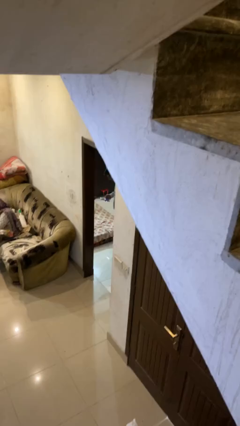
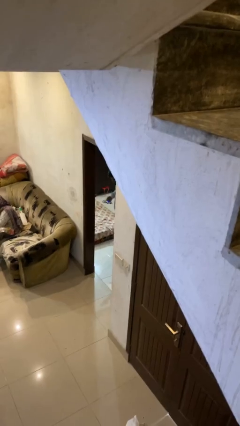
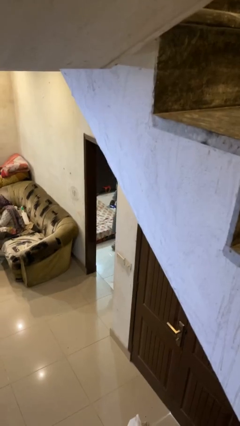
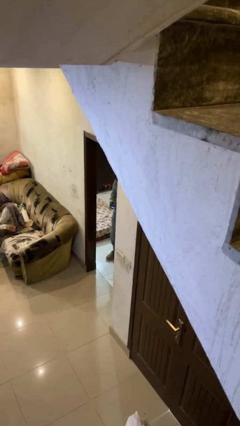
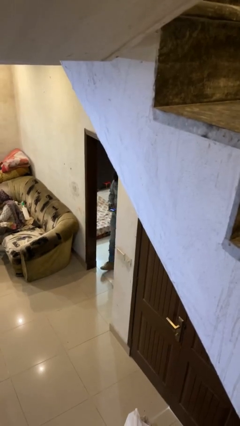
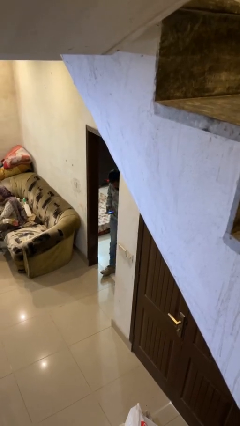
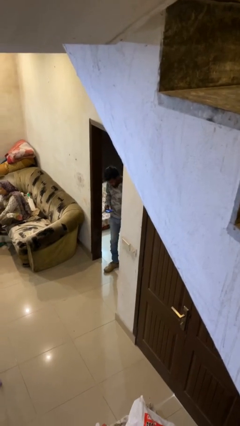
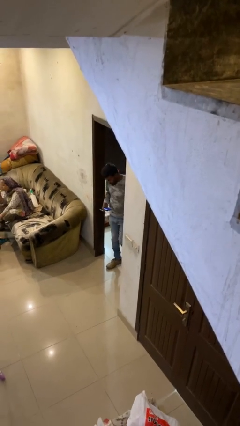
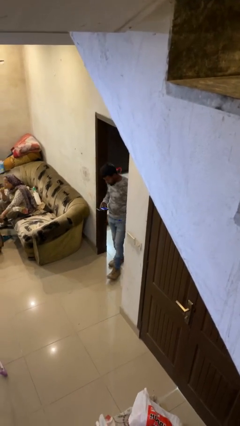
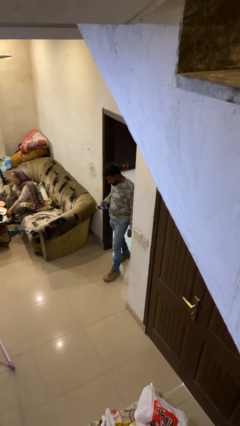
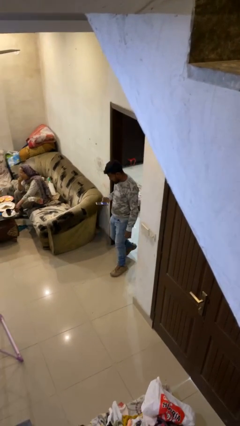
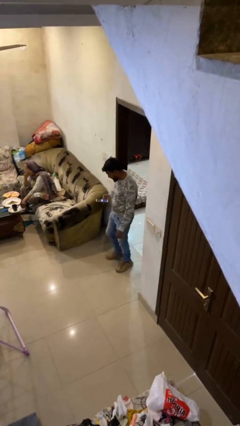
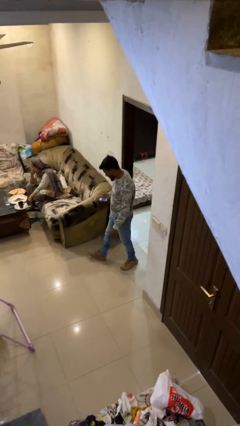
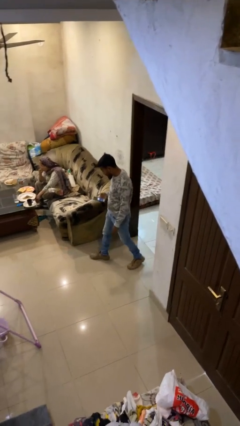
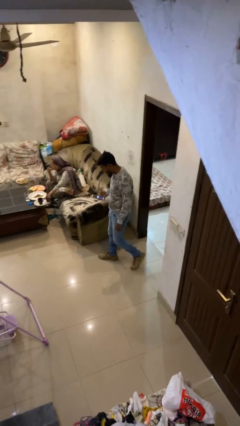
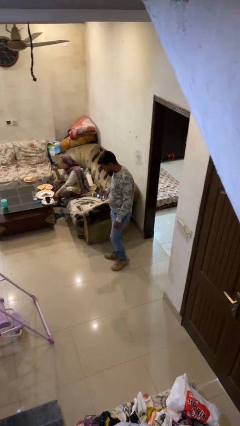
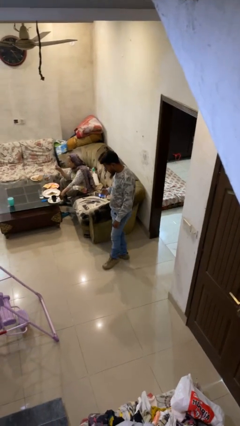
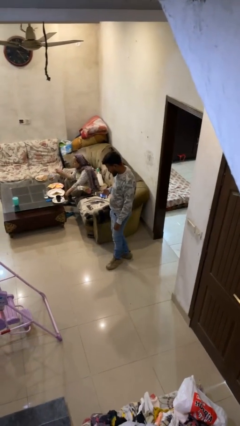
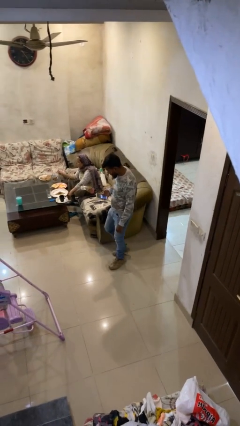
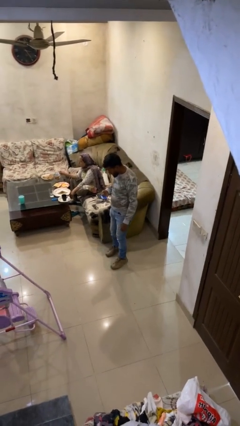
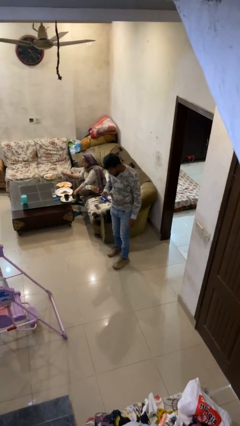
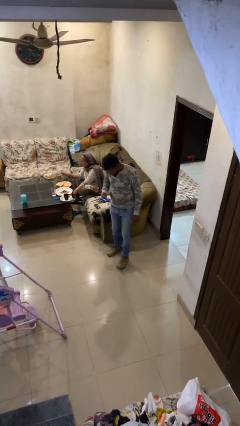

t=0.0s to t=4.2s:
person enters scene through structure

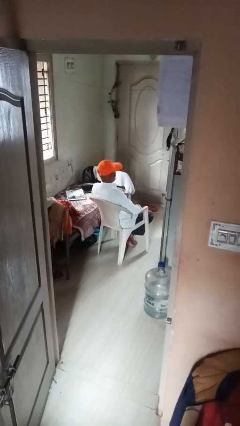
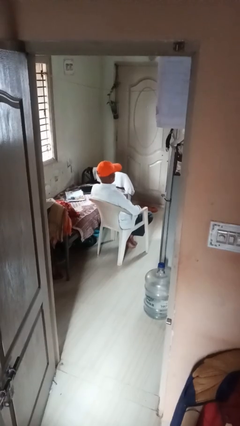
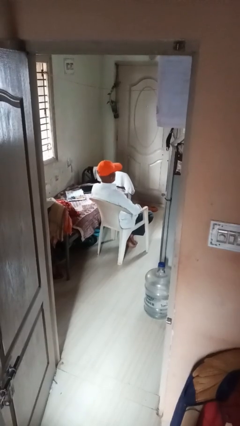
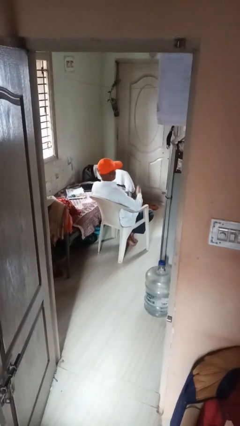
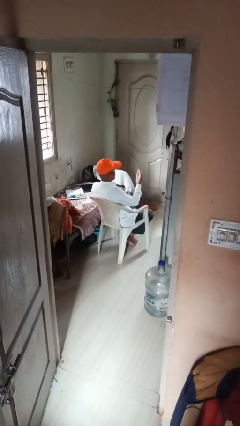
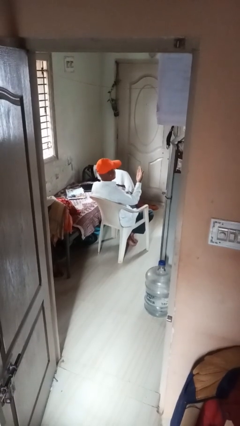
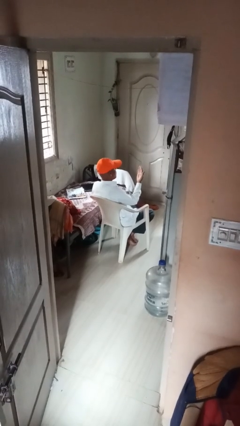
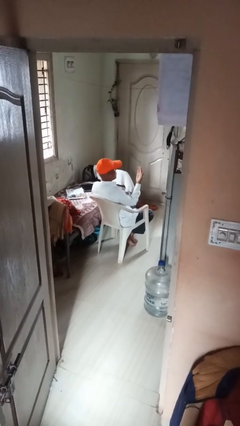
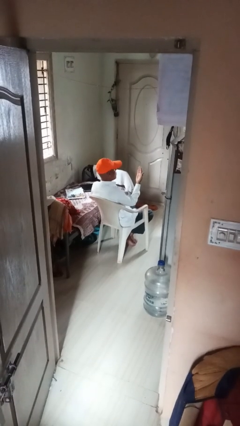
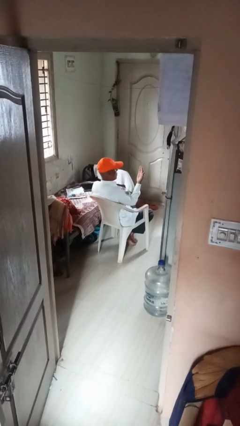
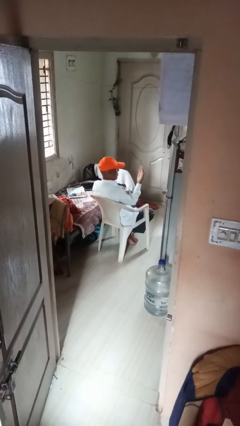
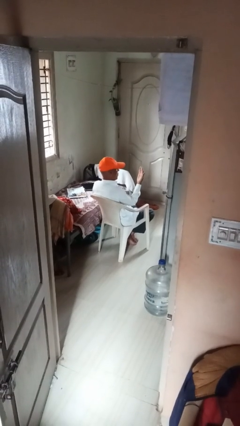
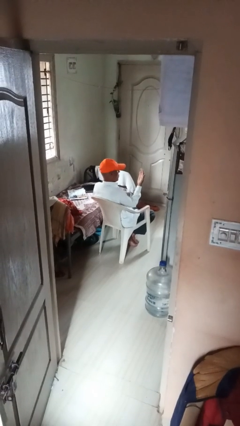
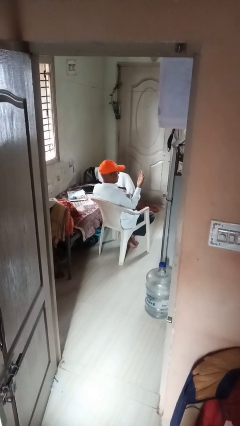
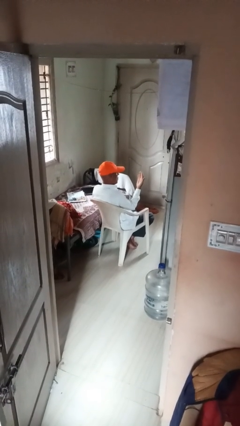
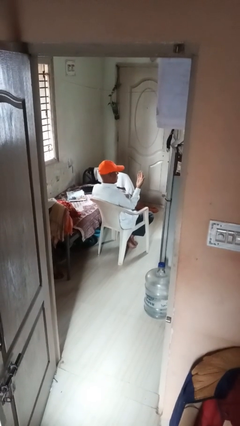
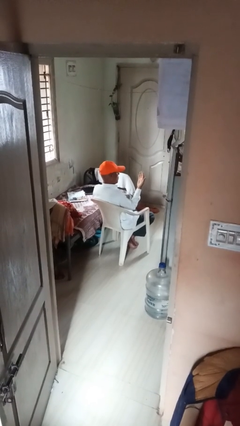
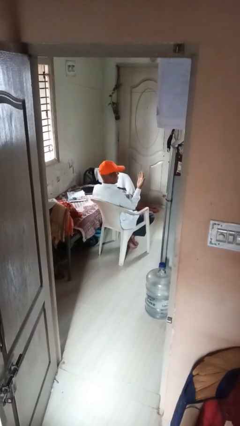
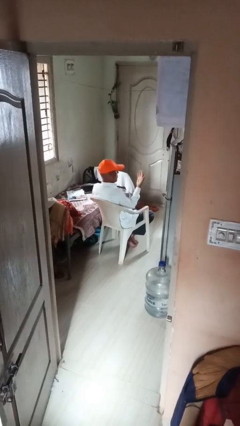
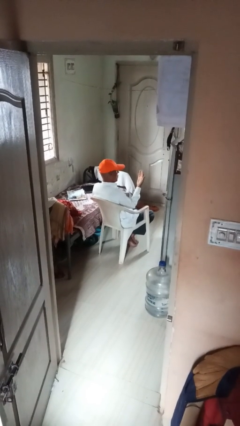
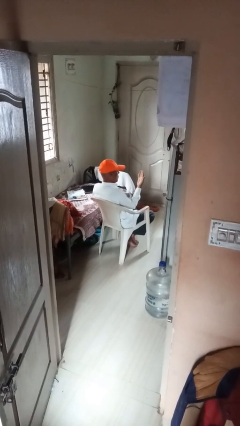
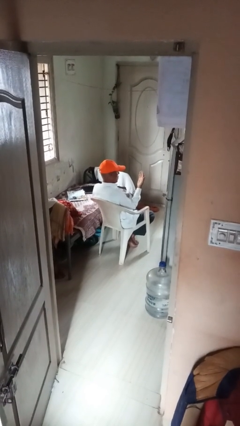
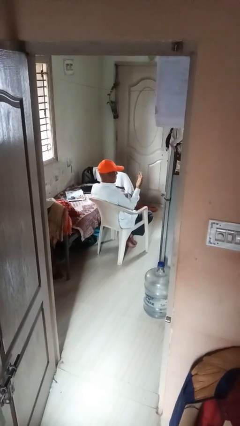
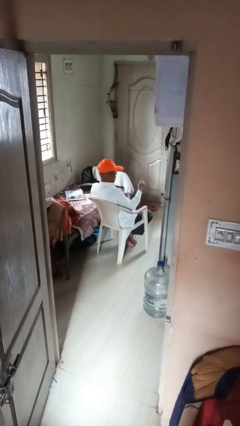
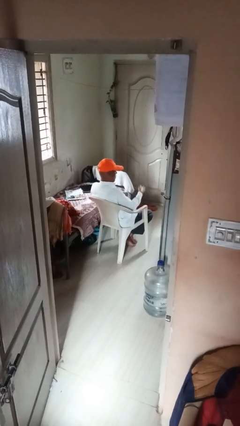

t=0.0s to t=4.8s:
person looks at hands in lap

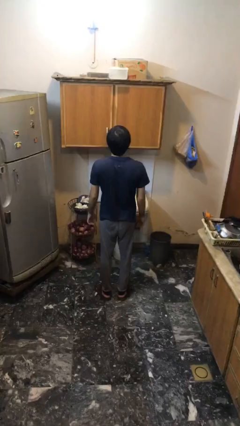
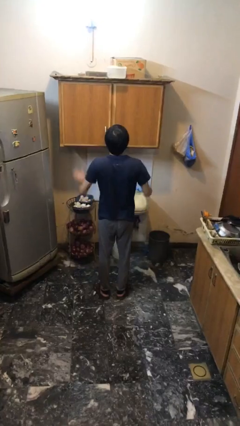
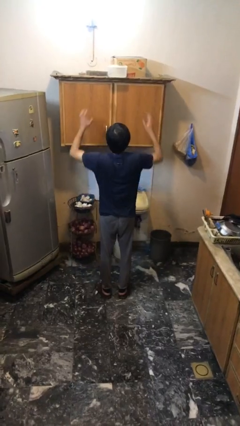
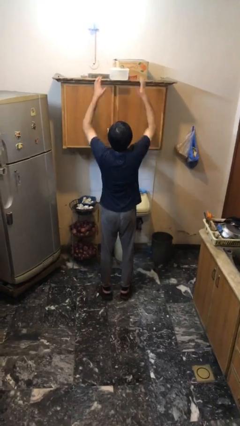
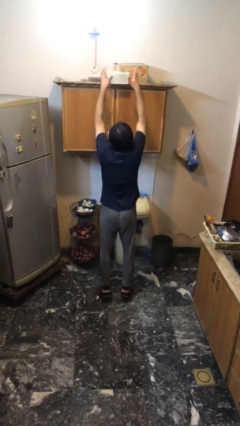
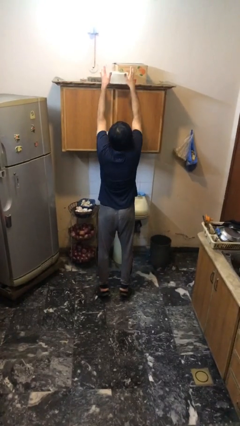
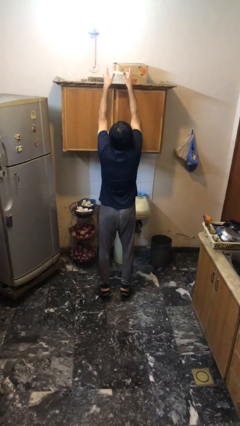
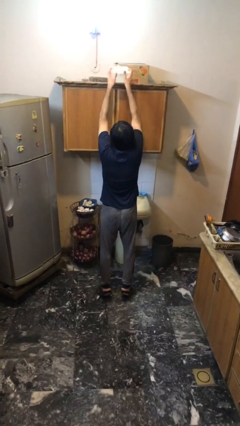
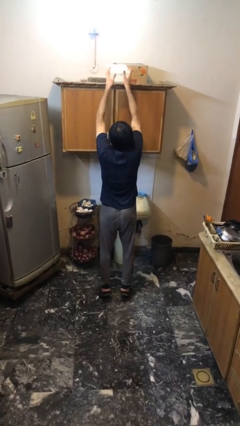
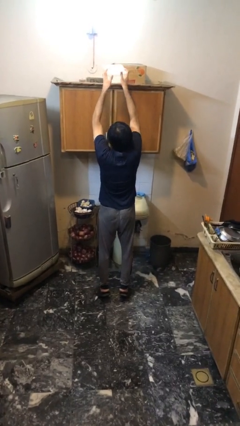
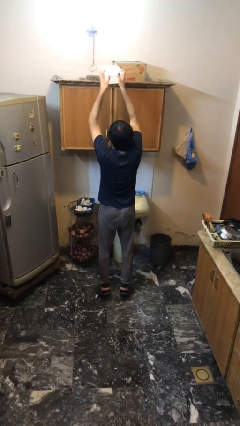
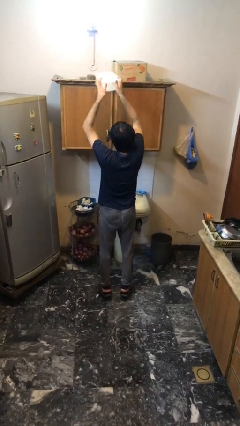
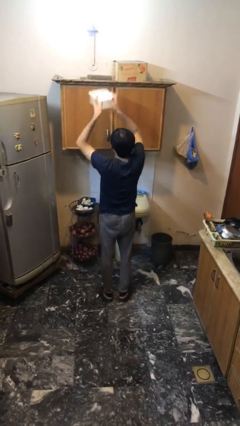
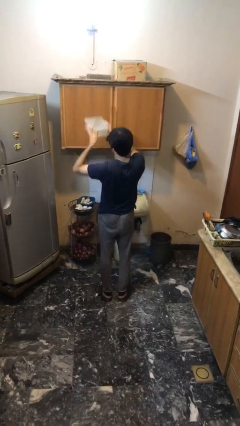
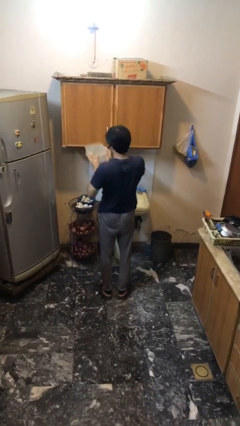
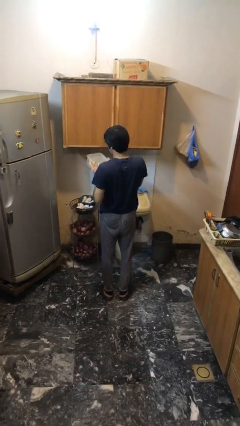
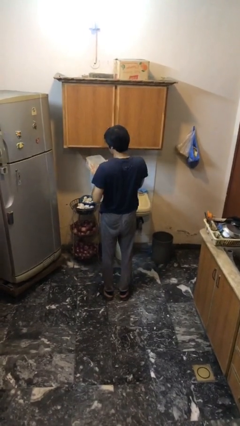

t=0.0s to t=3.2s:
person picks up object from shelf

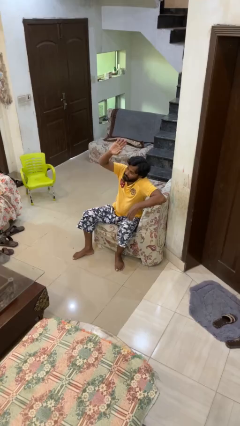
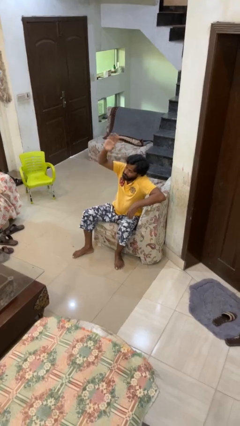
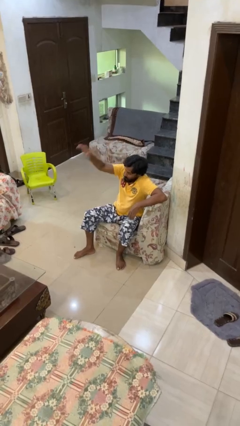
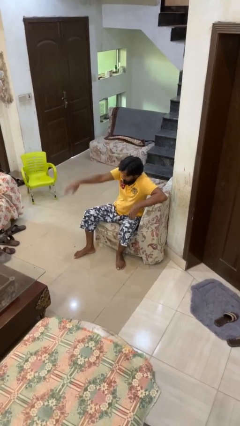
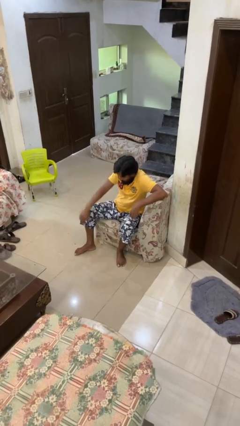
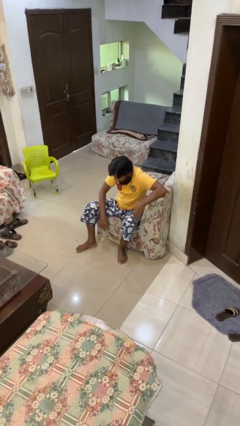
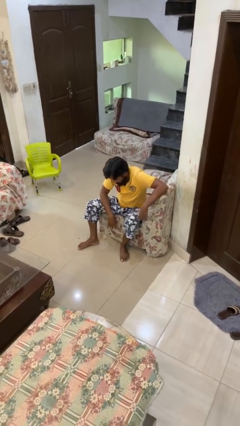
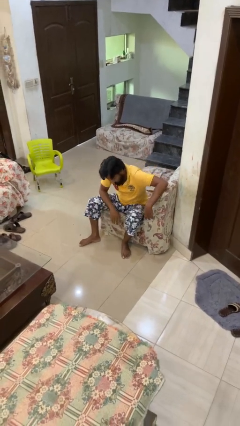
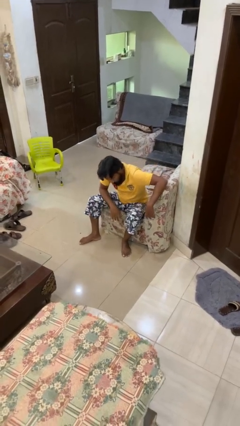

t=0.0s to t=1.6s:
person gestures lower hand

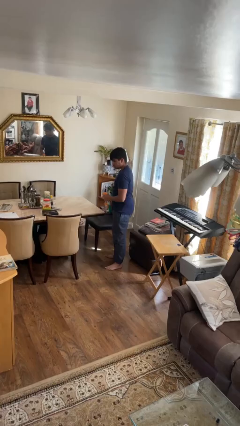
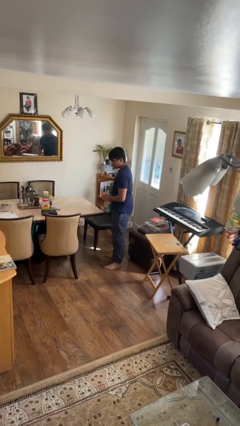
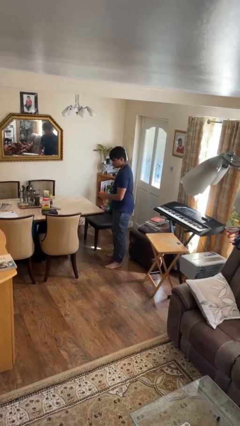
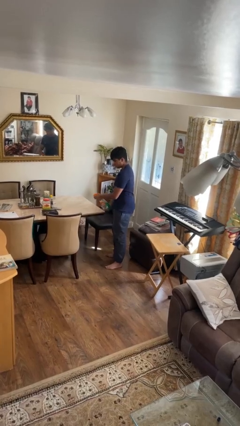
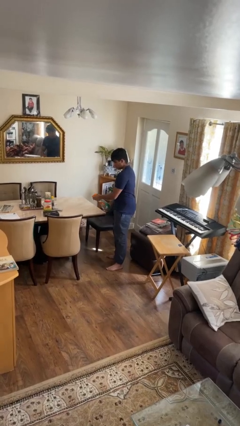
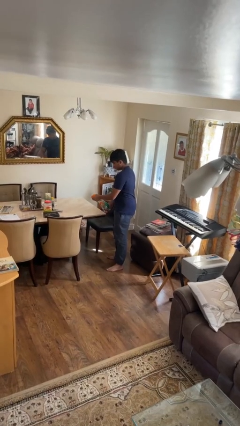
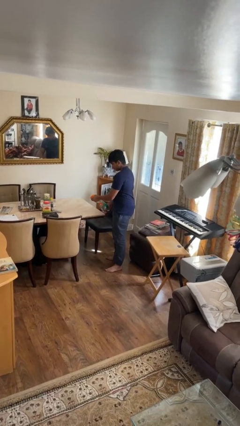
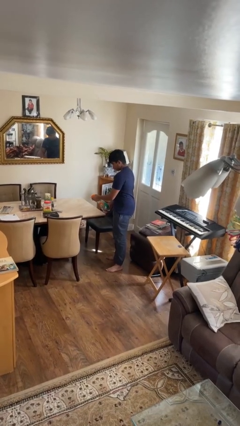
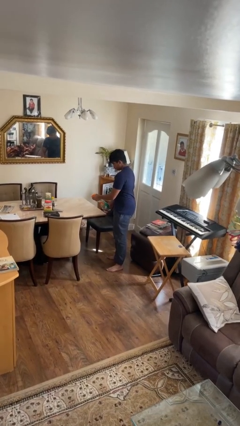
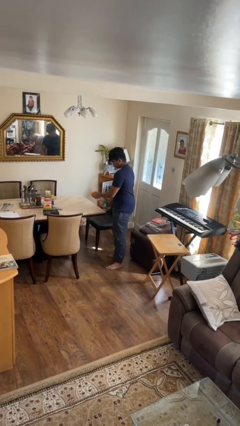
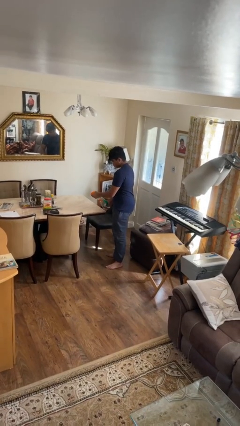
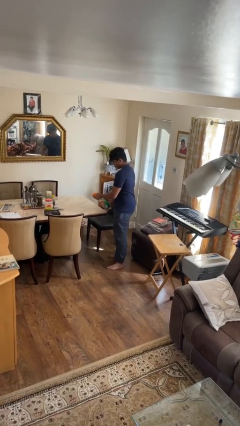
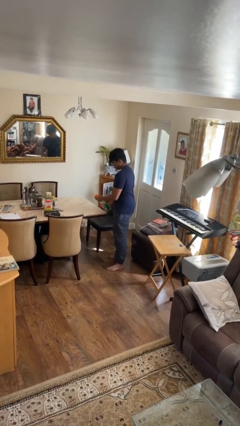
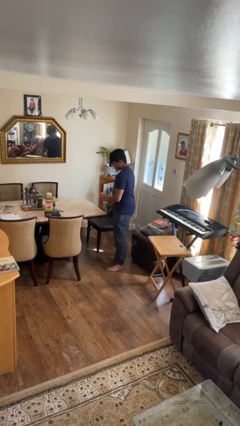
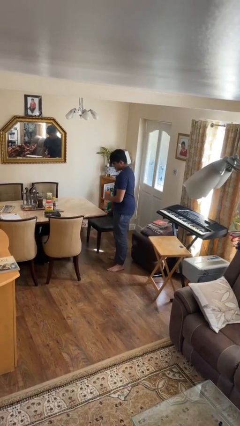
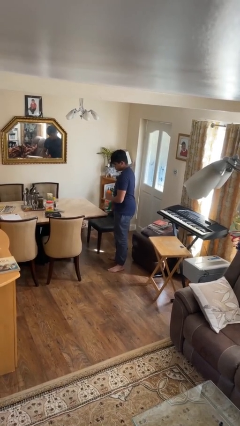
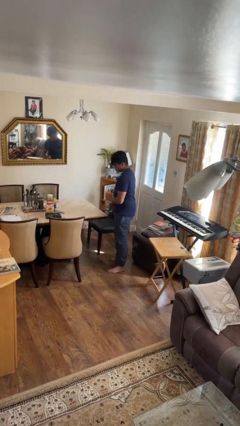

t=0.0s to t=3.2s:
person sprays from bottle

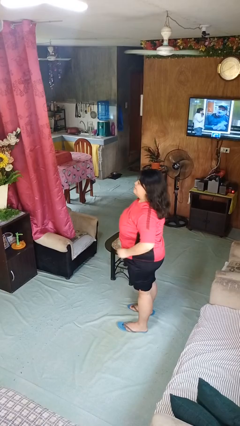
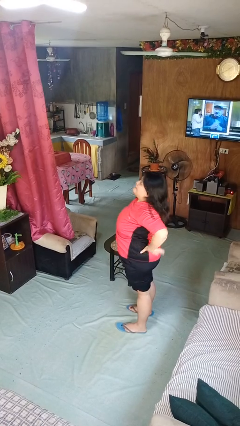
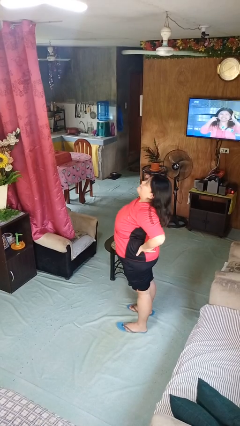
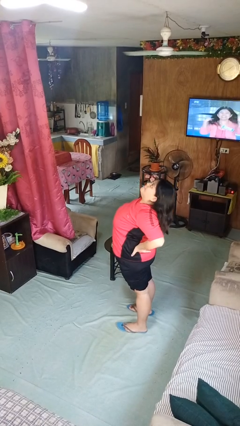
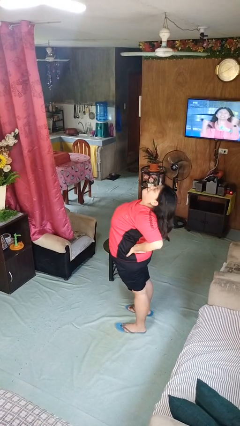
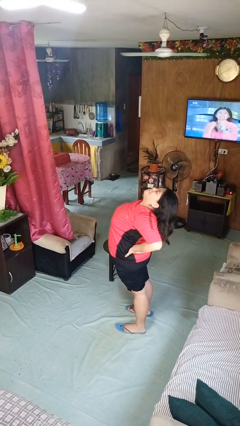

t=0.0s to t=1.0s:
person stretches back
